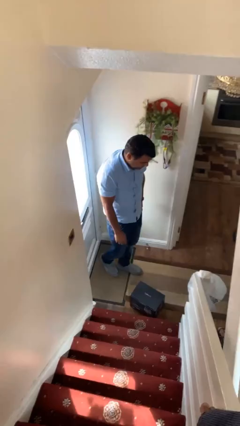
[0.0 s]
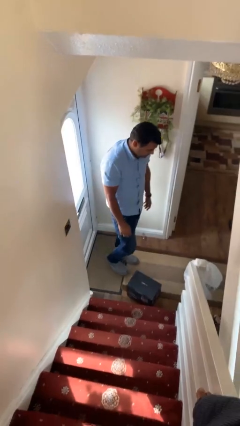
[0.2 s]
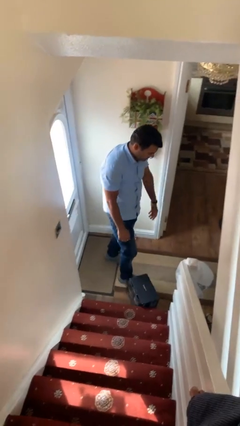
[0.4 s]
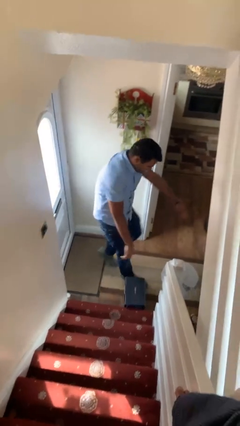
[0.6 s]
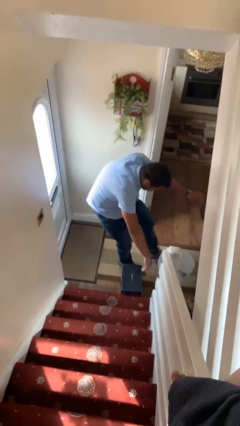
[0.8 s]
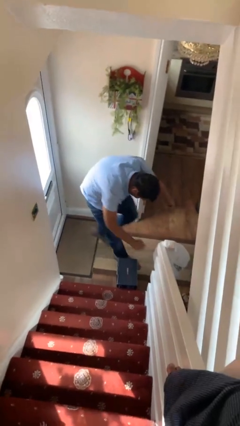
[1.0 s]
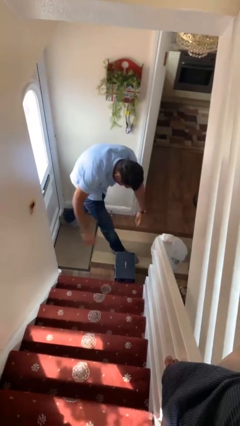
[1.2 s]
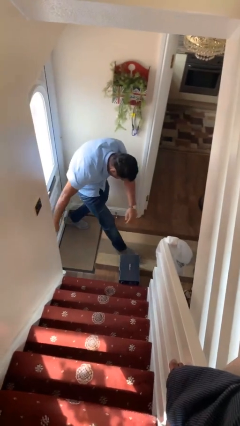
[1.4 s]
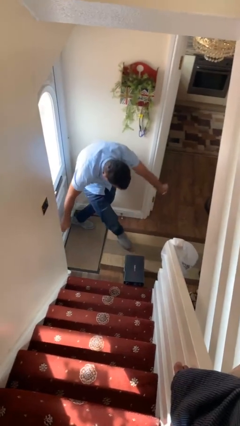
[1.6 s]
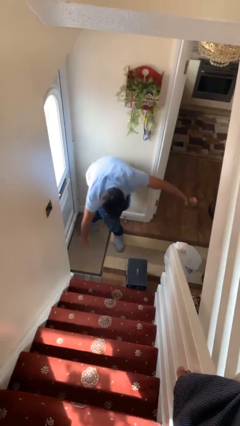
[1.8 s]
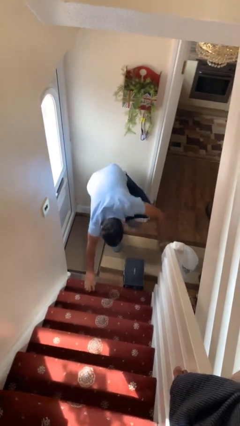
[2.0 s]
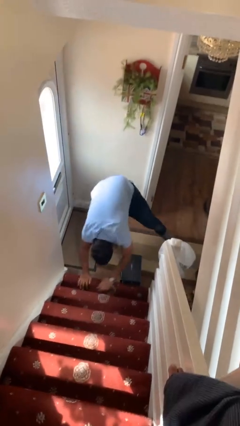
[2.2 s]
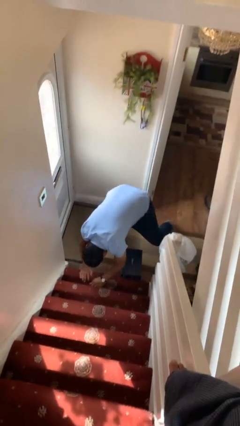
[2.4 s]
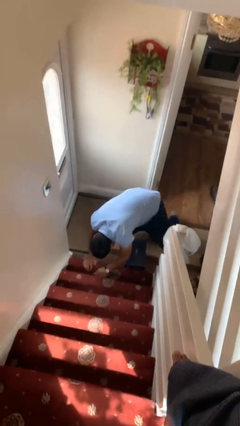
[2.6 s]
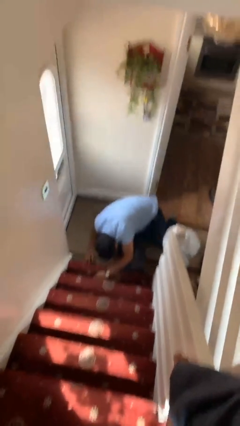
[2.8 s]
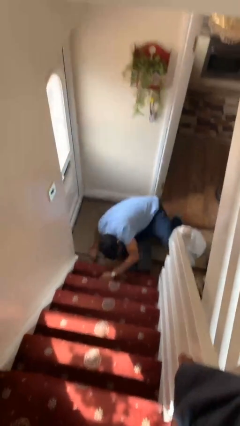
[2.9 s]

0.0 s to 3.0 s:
person trips on object on floor

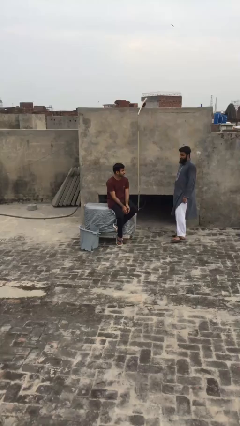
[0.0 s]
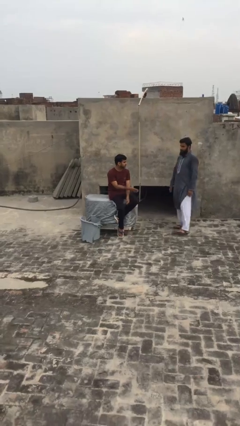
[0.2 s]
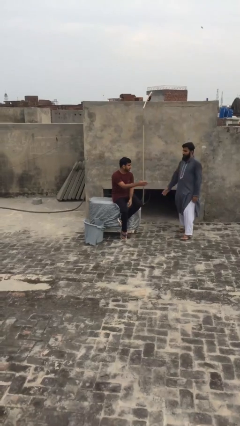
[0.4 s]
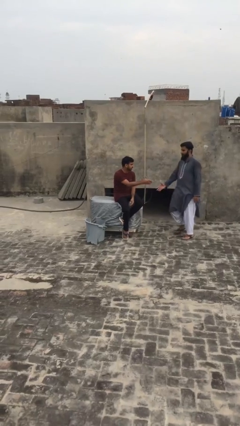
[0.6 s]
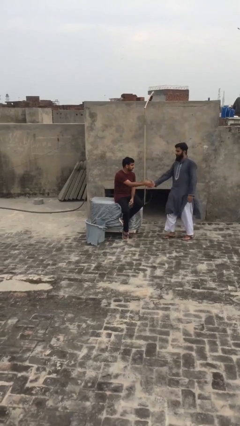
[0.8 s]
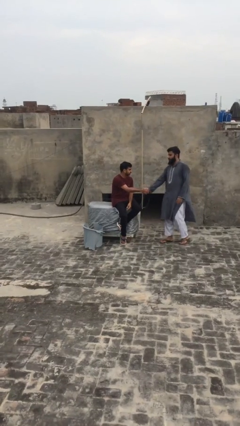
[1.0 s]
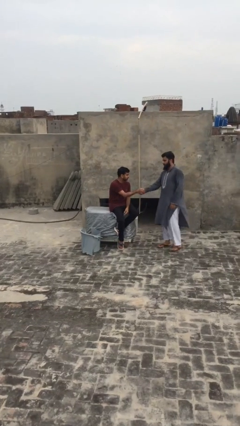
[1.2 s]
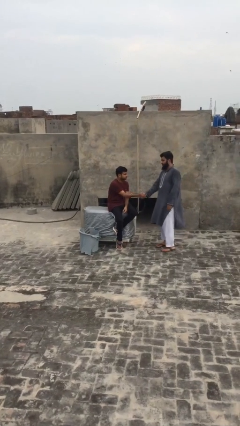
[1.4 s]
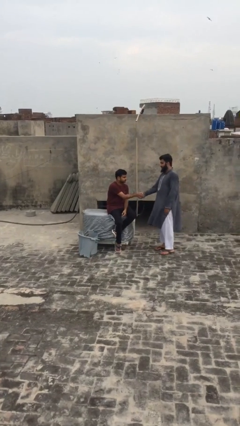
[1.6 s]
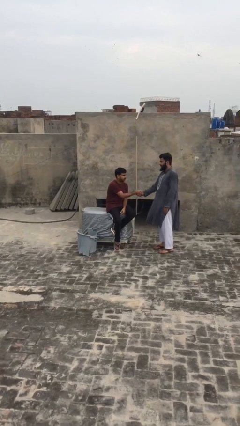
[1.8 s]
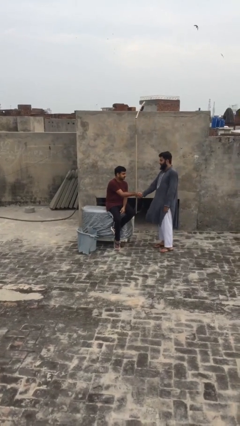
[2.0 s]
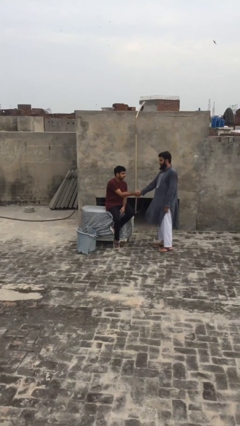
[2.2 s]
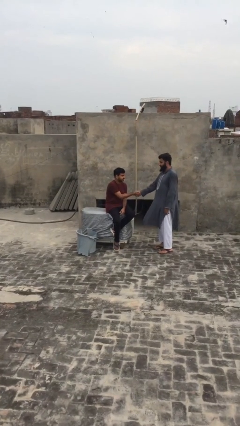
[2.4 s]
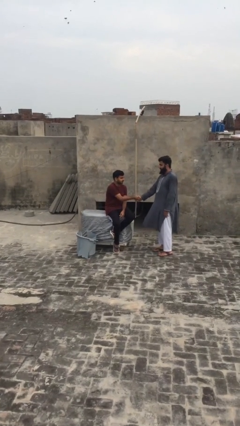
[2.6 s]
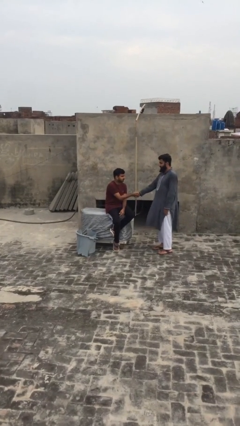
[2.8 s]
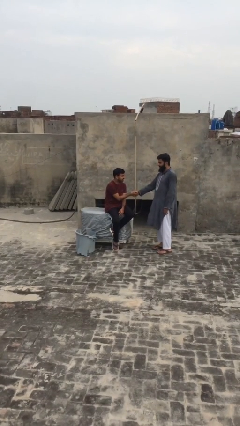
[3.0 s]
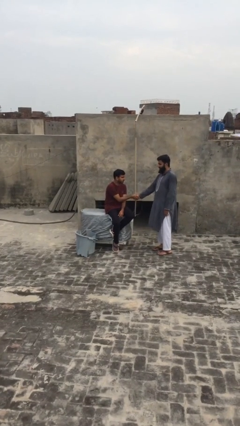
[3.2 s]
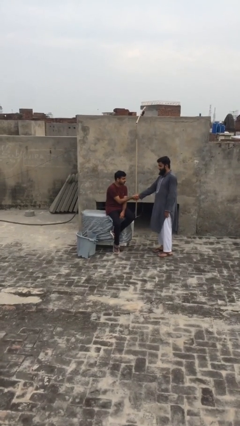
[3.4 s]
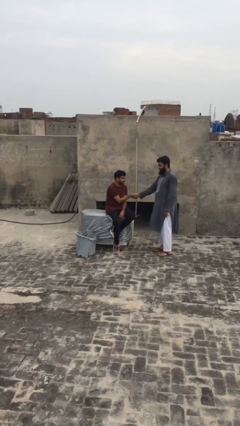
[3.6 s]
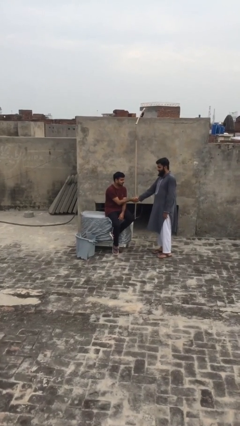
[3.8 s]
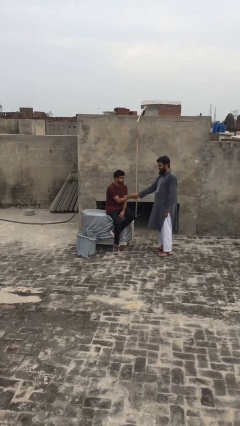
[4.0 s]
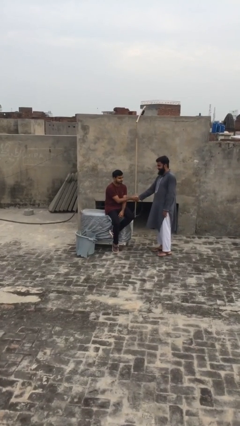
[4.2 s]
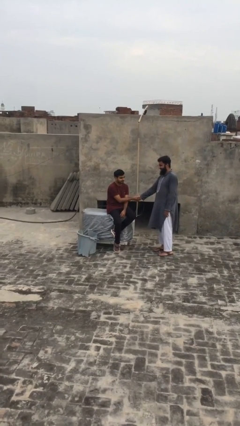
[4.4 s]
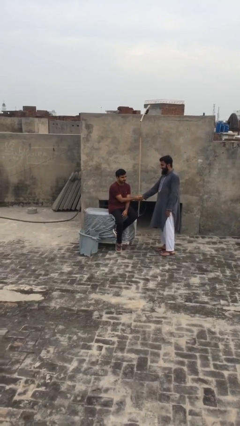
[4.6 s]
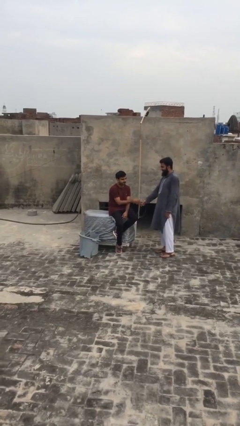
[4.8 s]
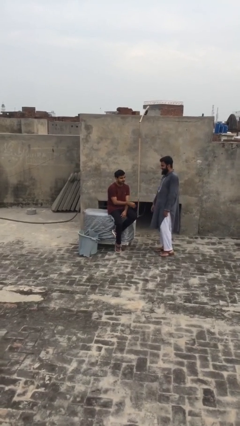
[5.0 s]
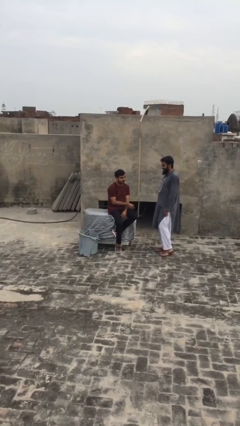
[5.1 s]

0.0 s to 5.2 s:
person shakes hand

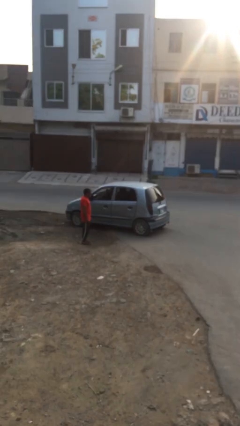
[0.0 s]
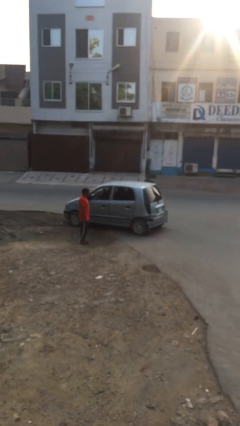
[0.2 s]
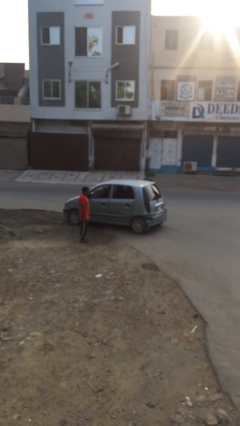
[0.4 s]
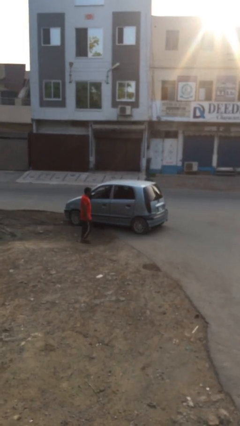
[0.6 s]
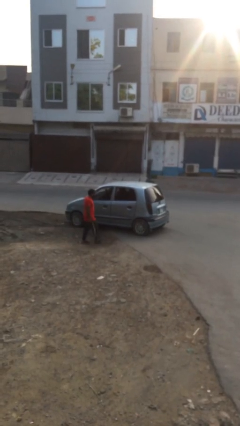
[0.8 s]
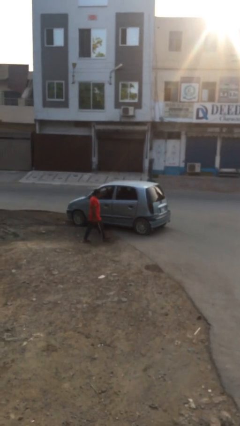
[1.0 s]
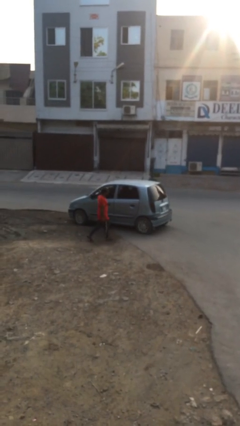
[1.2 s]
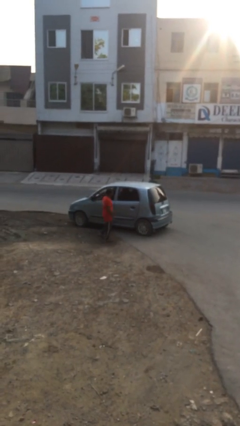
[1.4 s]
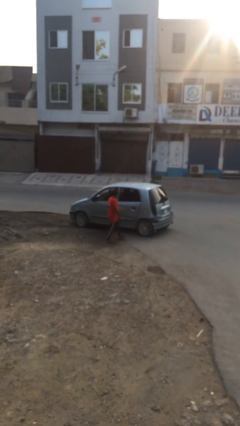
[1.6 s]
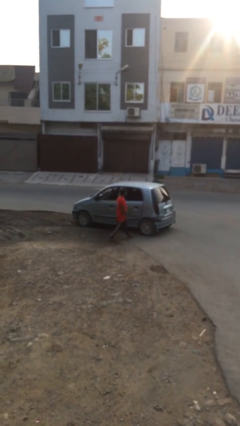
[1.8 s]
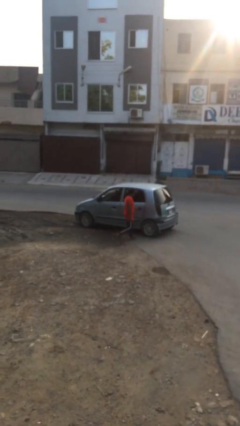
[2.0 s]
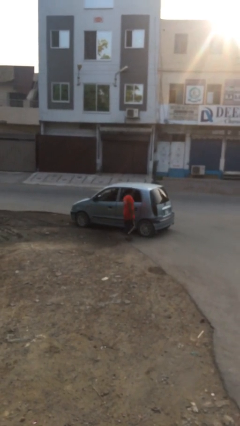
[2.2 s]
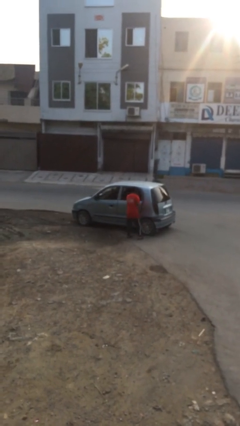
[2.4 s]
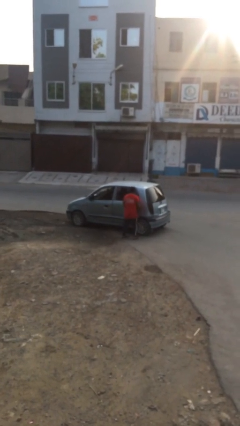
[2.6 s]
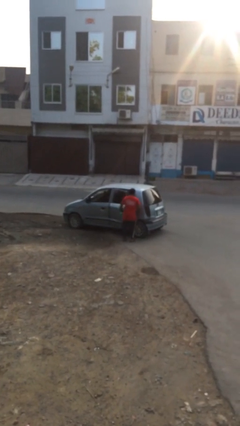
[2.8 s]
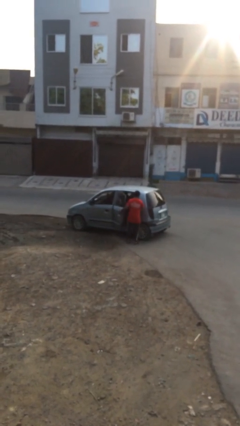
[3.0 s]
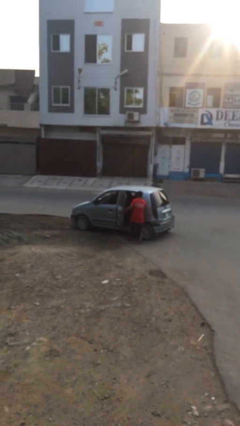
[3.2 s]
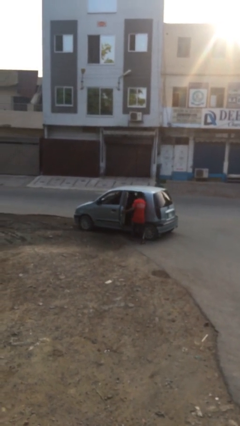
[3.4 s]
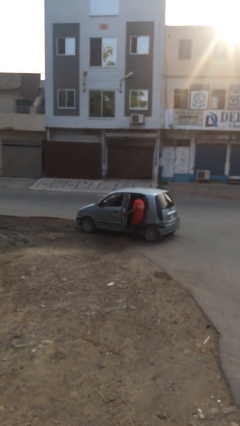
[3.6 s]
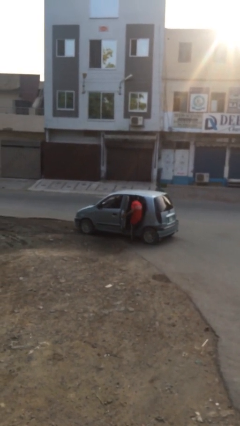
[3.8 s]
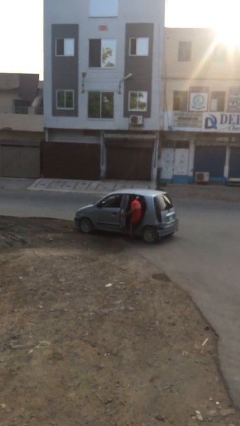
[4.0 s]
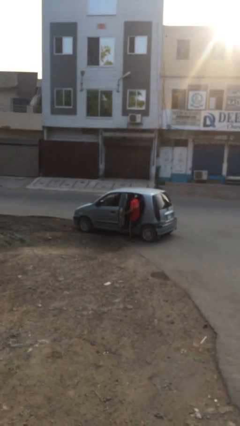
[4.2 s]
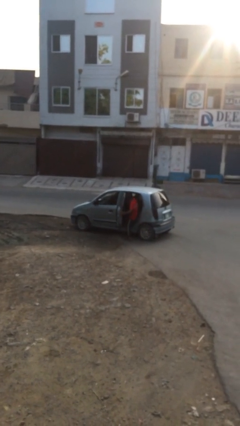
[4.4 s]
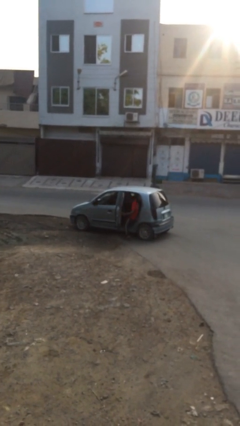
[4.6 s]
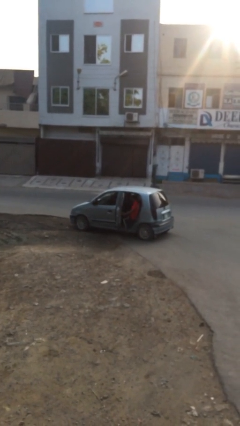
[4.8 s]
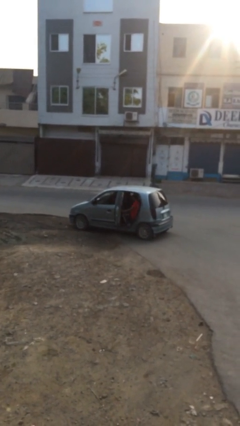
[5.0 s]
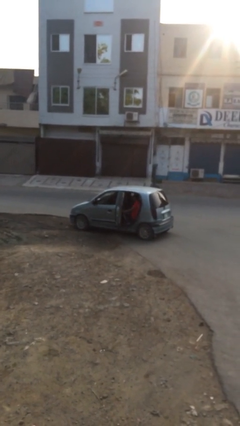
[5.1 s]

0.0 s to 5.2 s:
car picks up person

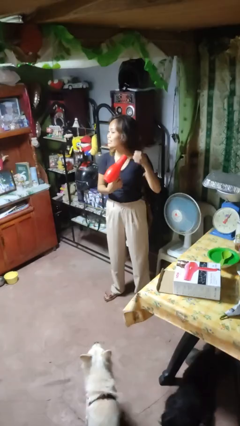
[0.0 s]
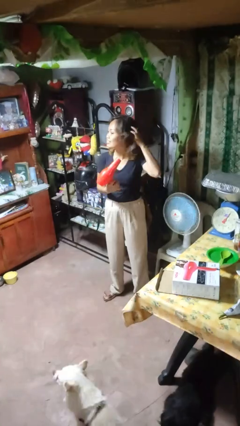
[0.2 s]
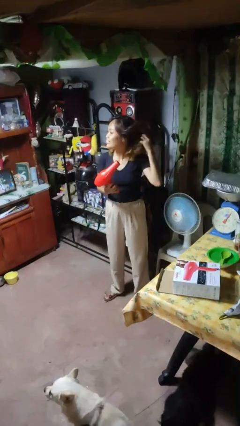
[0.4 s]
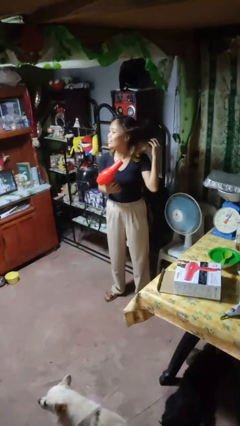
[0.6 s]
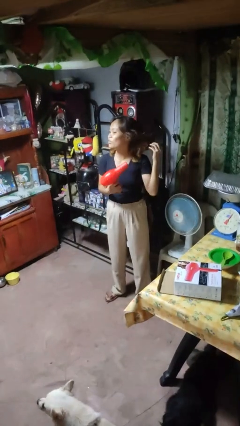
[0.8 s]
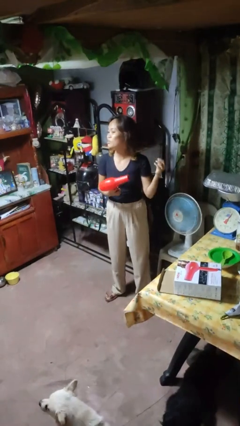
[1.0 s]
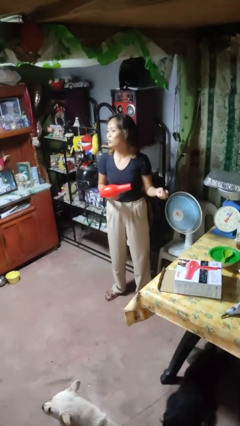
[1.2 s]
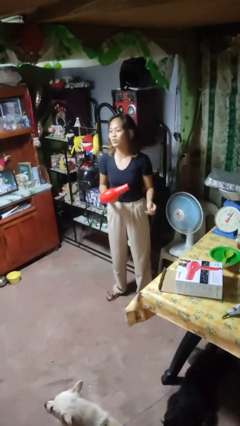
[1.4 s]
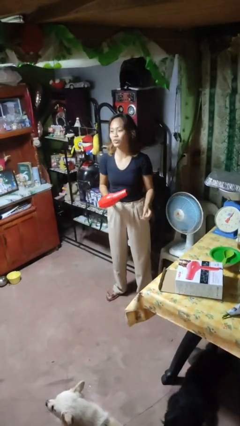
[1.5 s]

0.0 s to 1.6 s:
person dries hair with hairdryer

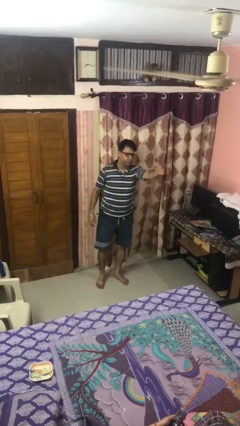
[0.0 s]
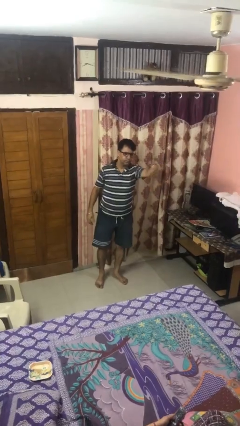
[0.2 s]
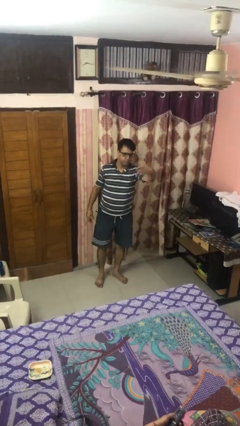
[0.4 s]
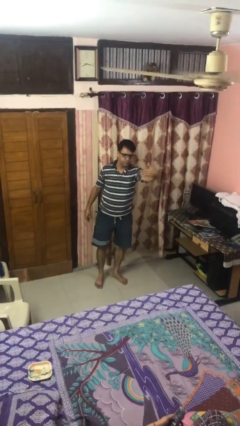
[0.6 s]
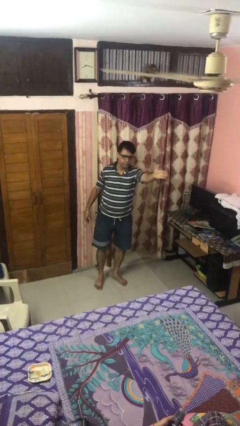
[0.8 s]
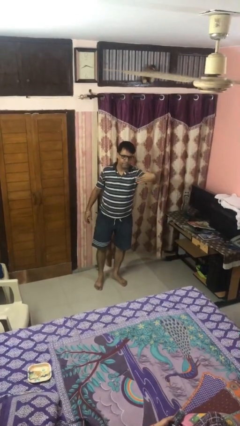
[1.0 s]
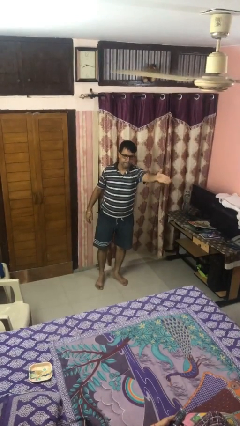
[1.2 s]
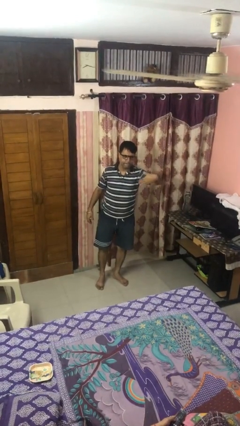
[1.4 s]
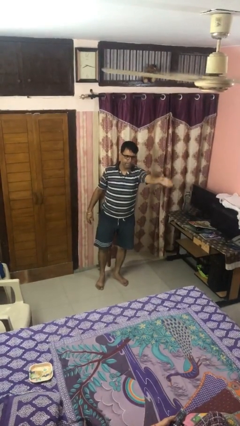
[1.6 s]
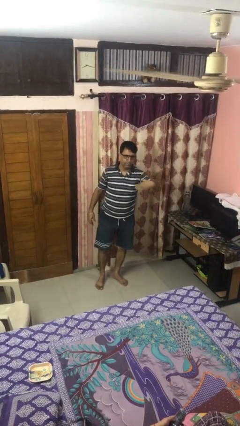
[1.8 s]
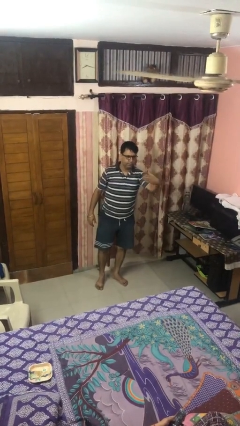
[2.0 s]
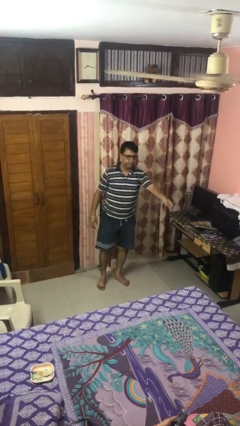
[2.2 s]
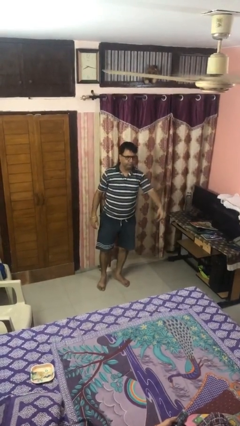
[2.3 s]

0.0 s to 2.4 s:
person gestures come here

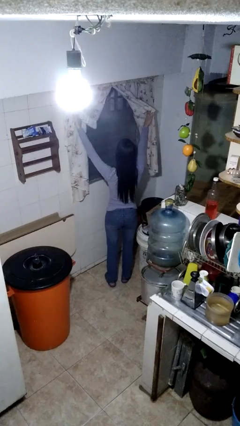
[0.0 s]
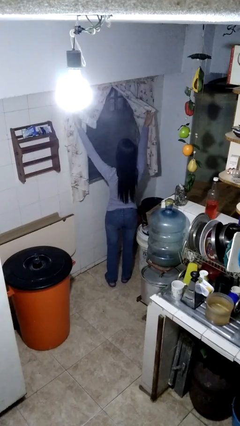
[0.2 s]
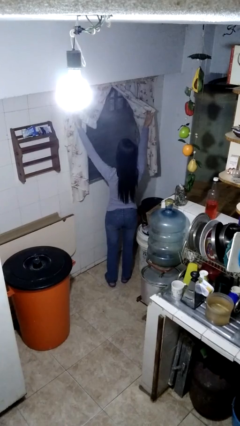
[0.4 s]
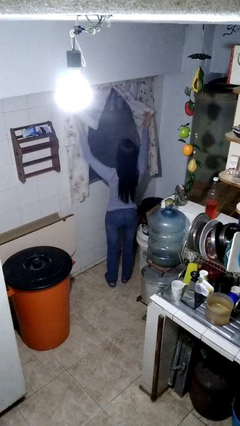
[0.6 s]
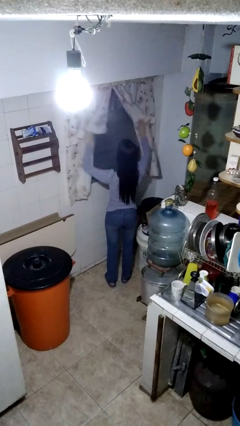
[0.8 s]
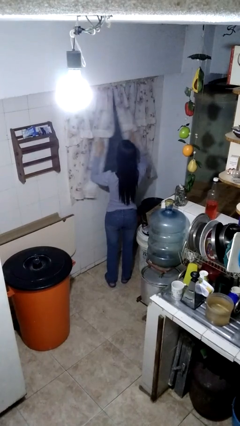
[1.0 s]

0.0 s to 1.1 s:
person closes curtains
